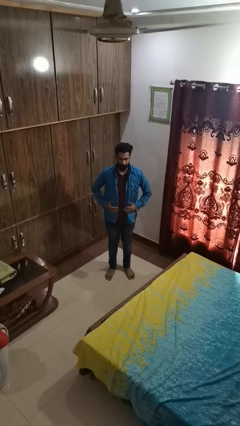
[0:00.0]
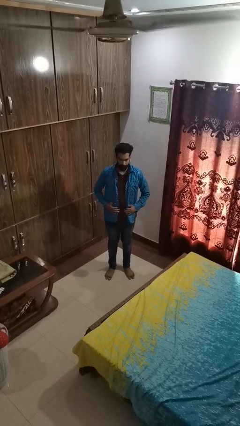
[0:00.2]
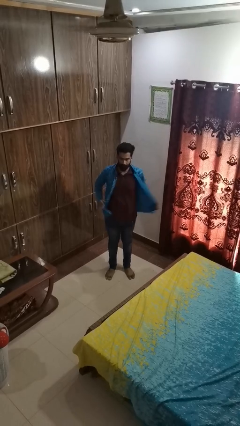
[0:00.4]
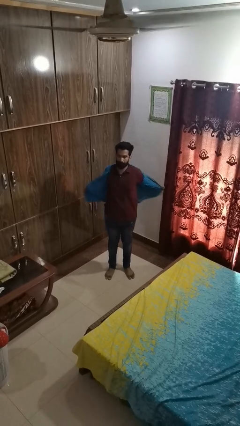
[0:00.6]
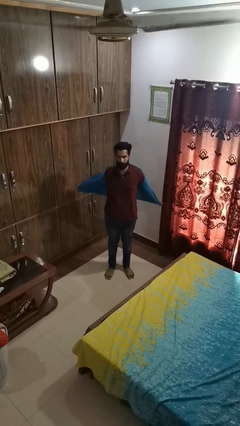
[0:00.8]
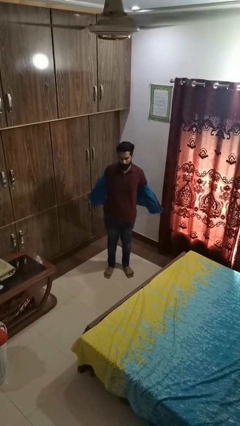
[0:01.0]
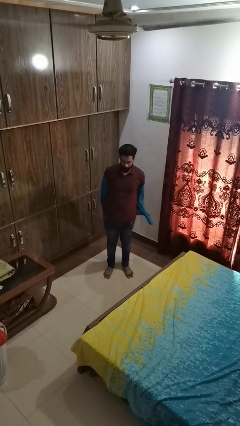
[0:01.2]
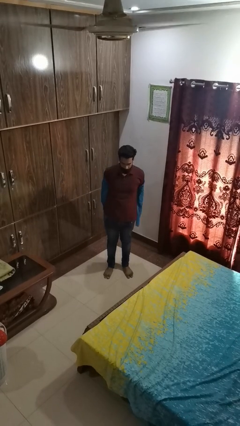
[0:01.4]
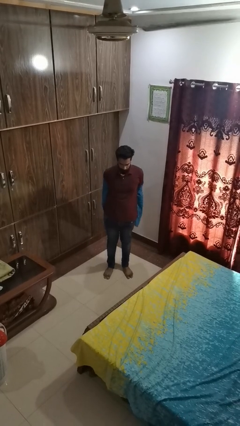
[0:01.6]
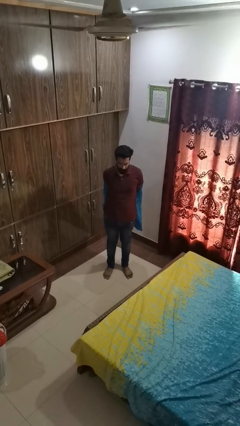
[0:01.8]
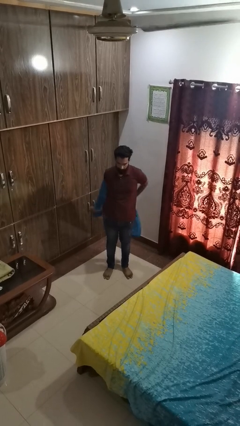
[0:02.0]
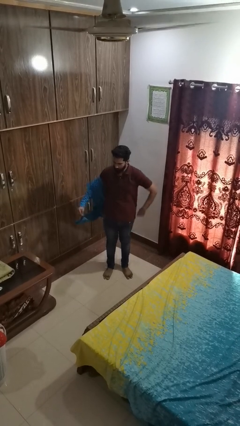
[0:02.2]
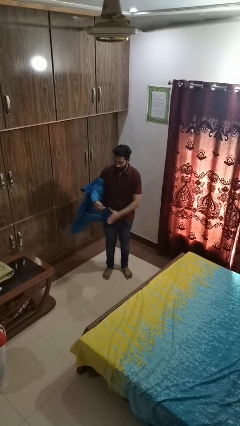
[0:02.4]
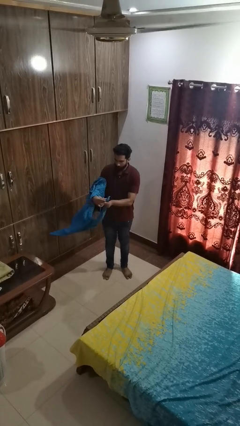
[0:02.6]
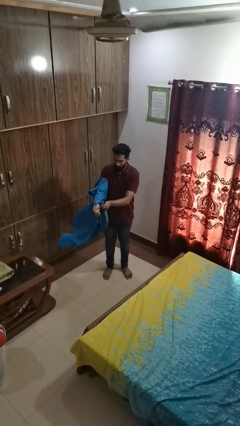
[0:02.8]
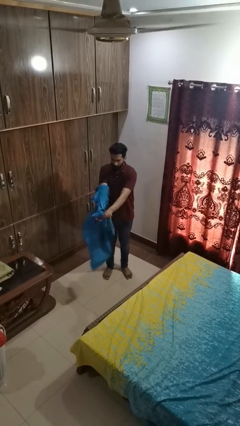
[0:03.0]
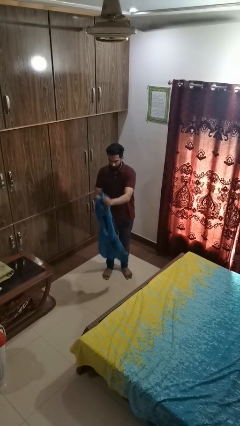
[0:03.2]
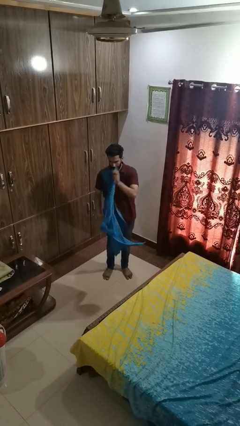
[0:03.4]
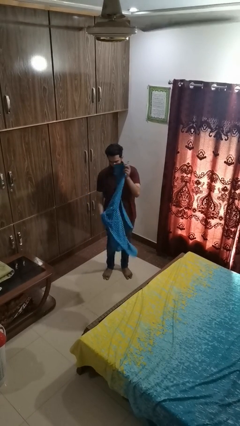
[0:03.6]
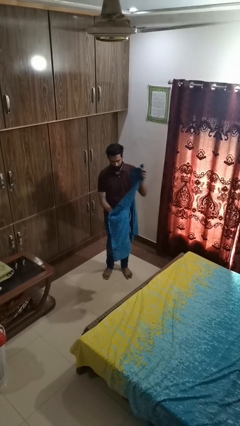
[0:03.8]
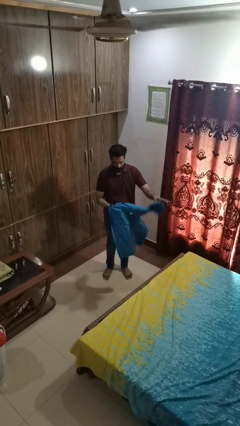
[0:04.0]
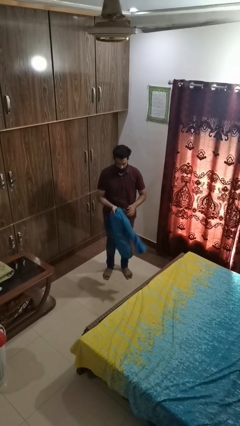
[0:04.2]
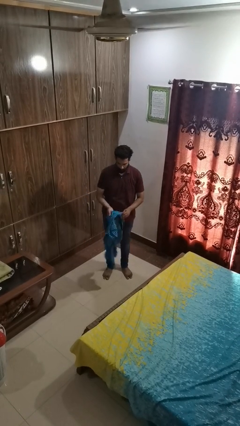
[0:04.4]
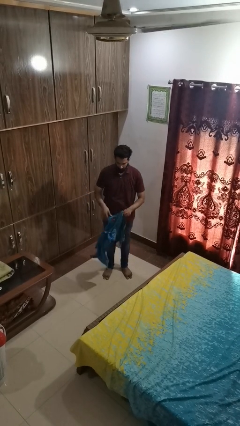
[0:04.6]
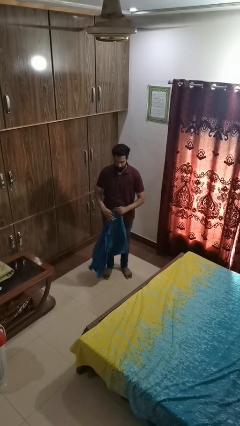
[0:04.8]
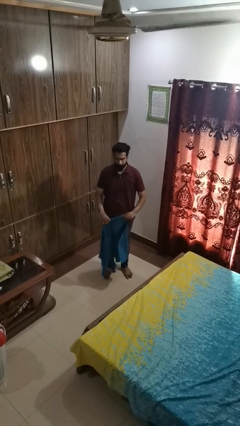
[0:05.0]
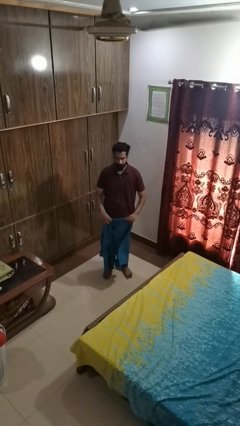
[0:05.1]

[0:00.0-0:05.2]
person takes off shirt

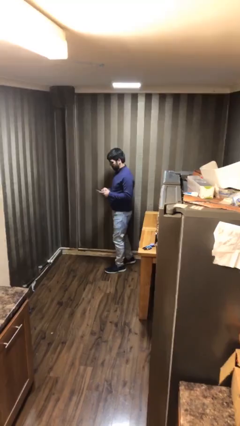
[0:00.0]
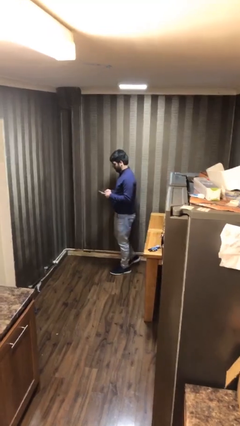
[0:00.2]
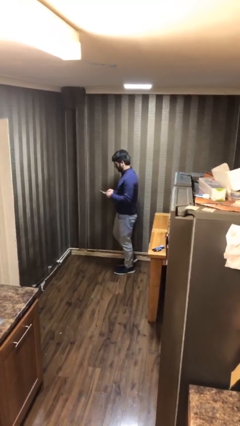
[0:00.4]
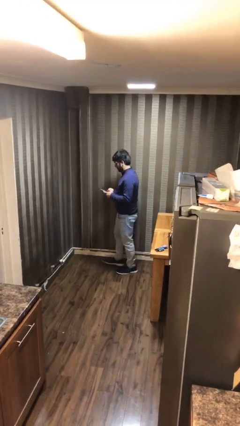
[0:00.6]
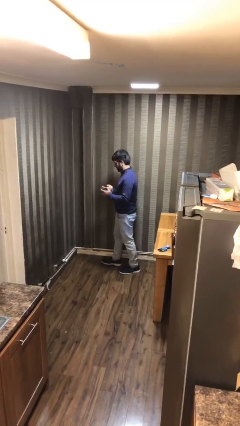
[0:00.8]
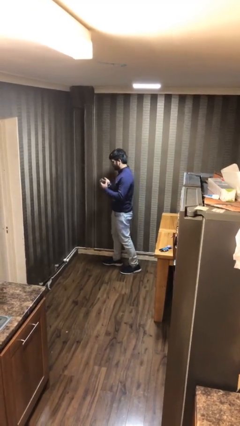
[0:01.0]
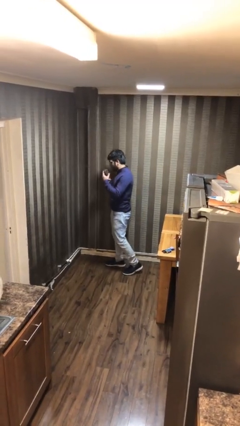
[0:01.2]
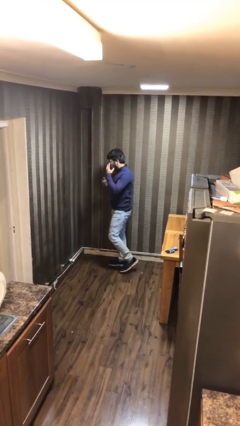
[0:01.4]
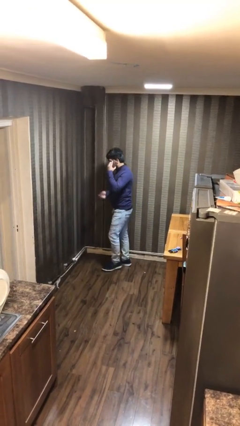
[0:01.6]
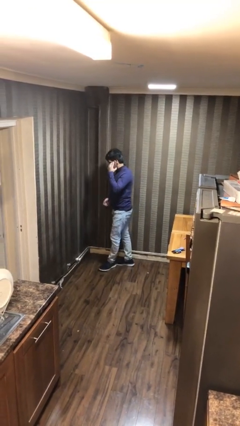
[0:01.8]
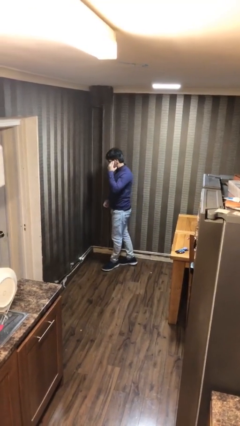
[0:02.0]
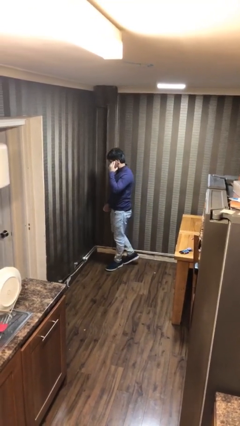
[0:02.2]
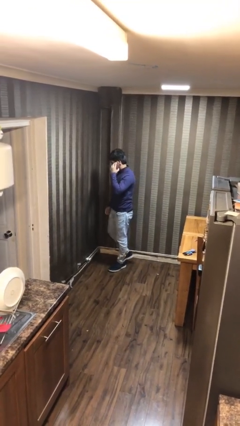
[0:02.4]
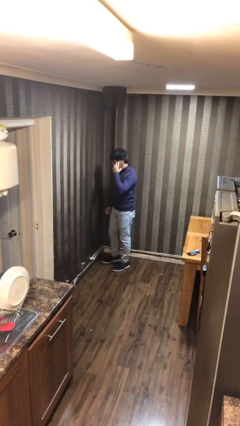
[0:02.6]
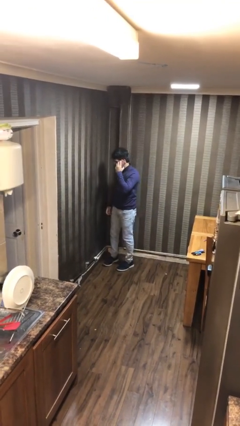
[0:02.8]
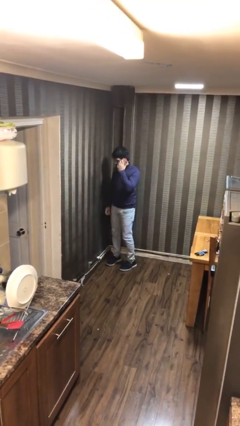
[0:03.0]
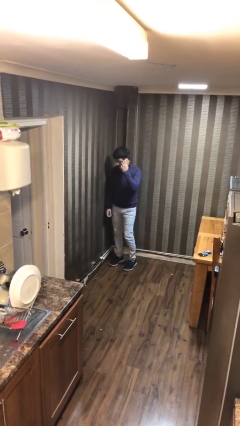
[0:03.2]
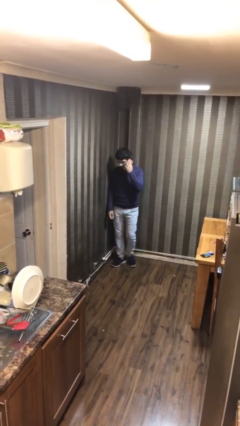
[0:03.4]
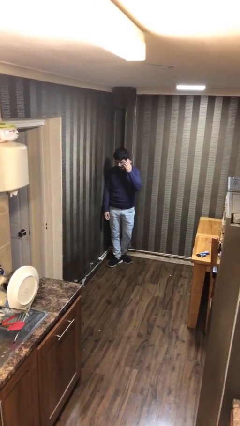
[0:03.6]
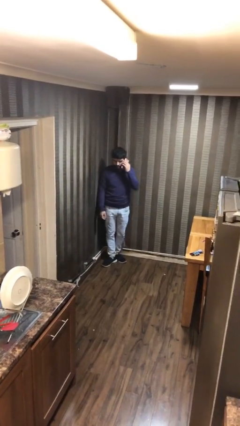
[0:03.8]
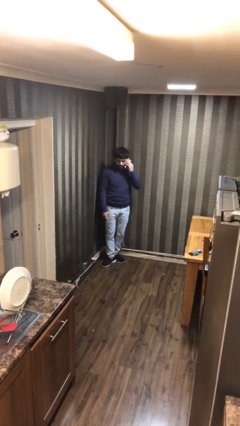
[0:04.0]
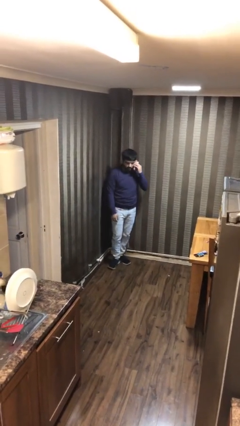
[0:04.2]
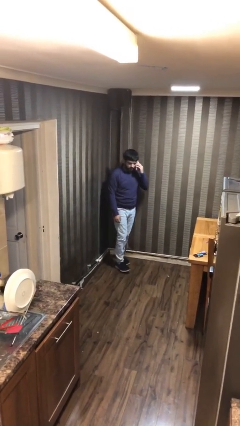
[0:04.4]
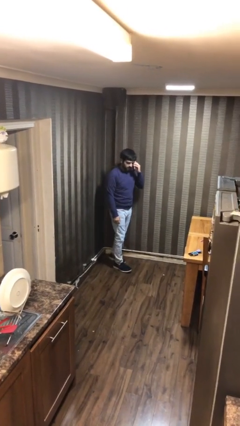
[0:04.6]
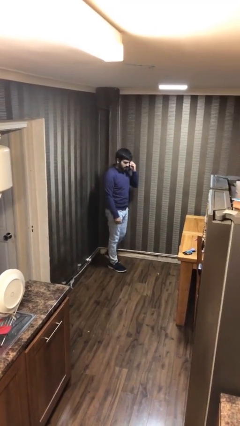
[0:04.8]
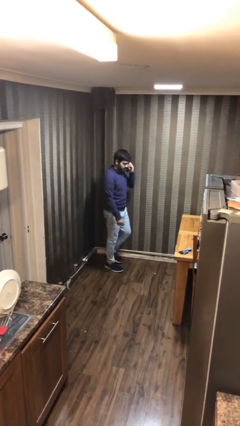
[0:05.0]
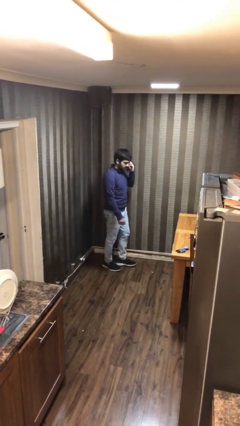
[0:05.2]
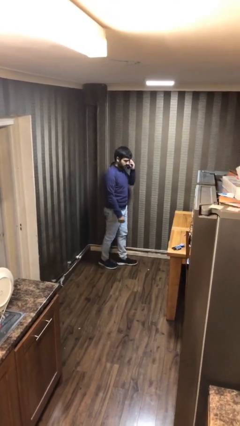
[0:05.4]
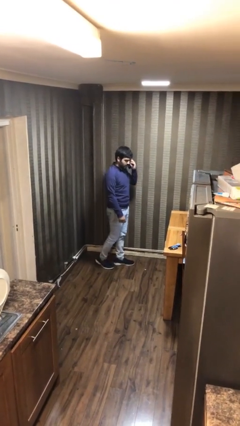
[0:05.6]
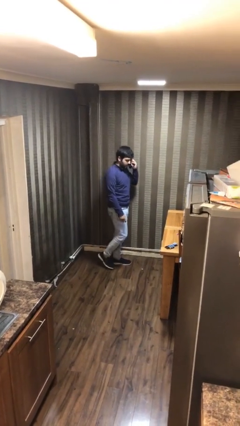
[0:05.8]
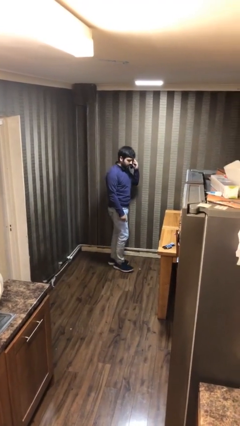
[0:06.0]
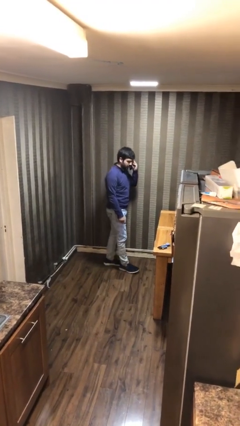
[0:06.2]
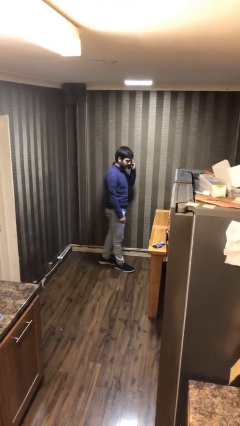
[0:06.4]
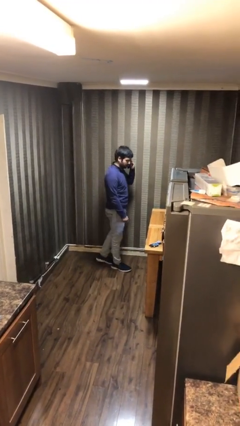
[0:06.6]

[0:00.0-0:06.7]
person talks on phone

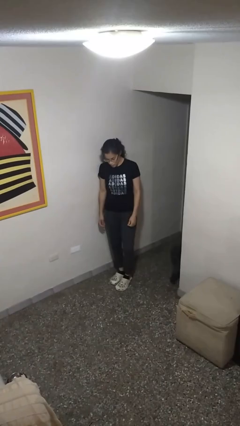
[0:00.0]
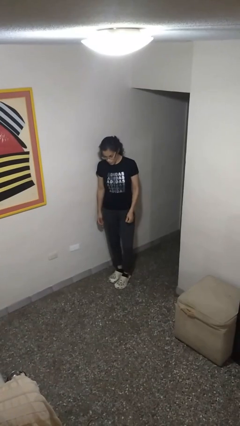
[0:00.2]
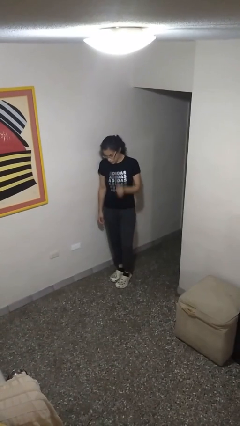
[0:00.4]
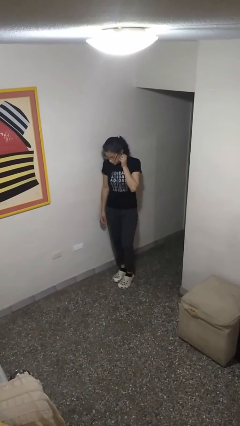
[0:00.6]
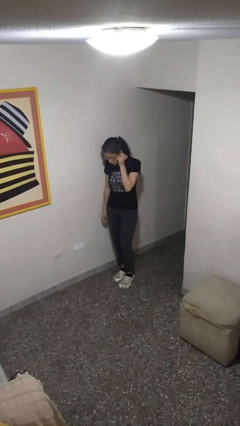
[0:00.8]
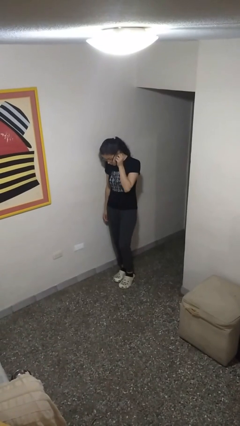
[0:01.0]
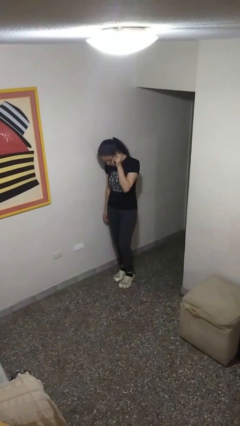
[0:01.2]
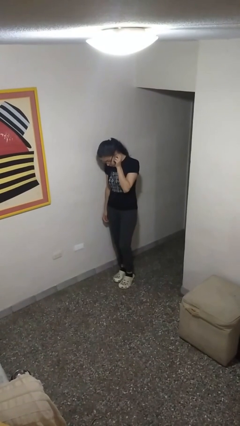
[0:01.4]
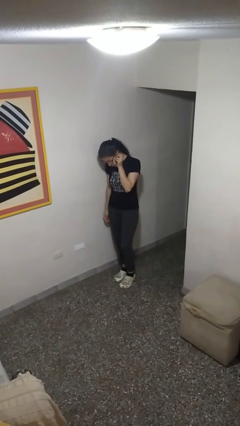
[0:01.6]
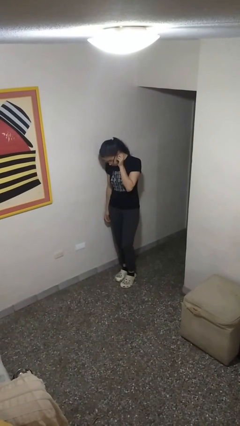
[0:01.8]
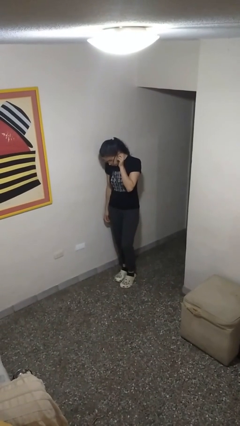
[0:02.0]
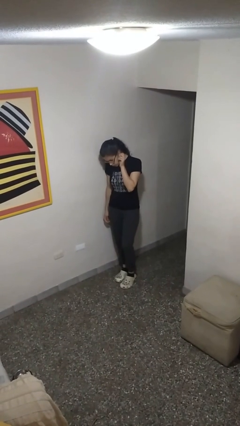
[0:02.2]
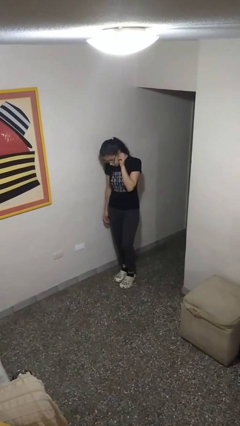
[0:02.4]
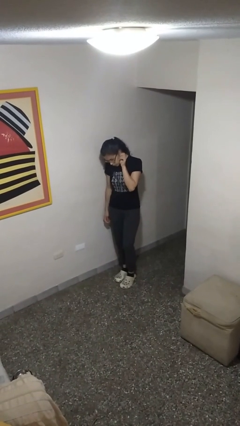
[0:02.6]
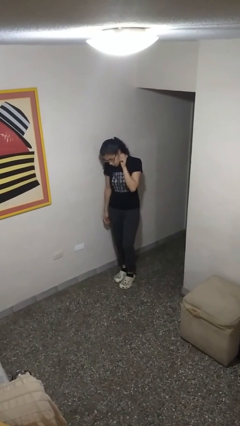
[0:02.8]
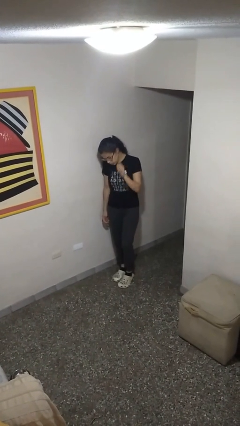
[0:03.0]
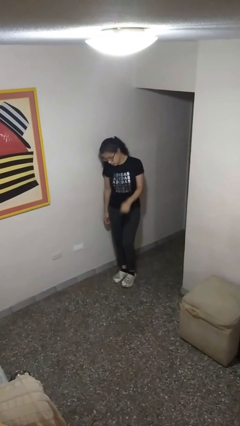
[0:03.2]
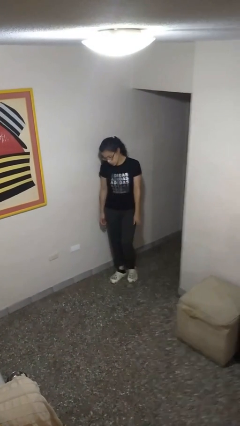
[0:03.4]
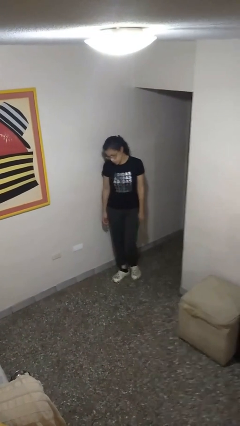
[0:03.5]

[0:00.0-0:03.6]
person touches earlobe

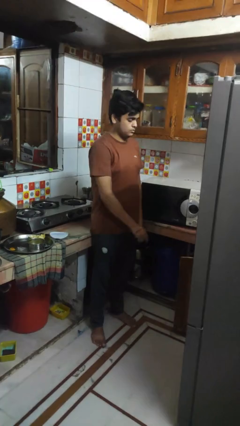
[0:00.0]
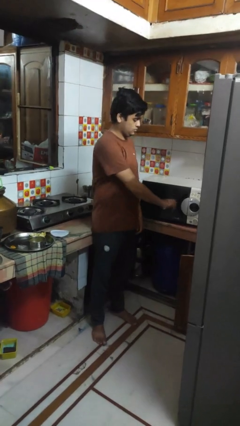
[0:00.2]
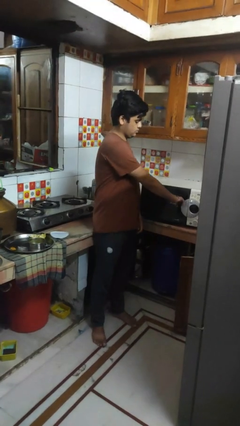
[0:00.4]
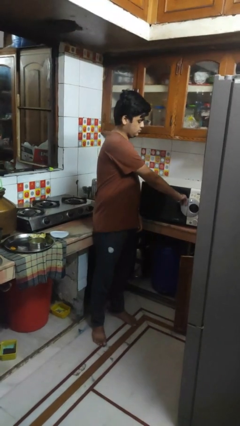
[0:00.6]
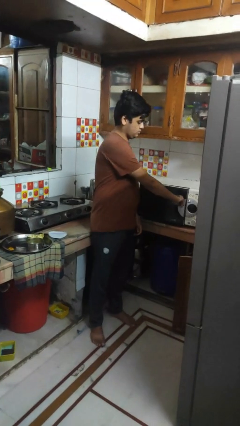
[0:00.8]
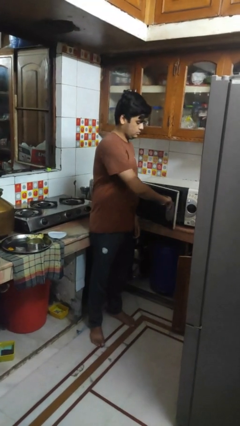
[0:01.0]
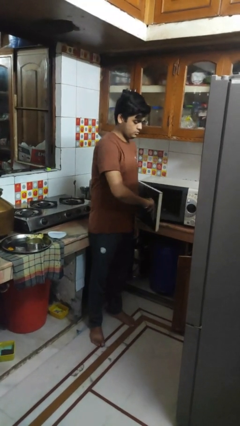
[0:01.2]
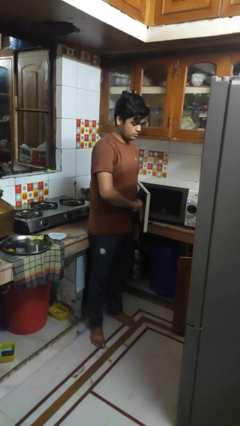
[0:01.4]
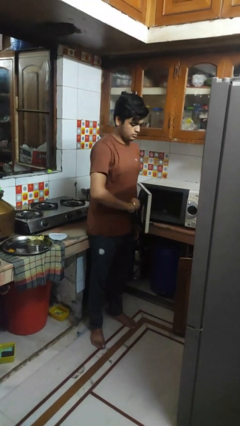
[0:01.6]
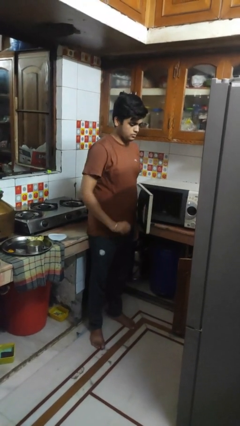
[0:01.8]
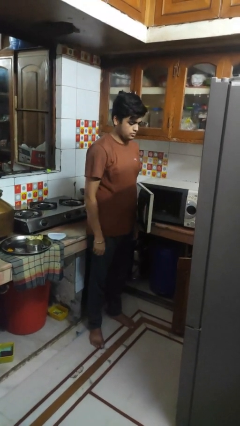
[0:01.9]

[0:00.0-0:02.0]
person opens oven door
